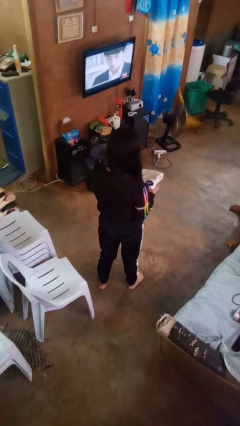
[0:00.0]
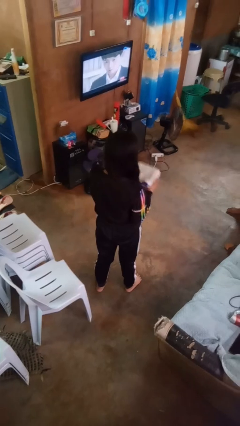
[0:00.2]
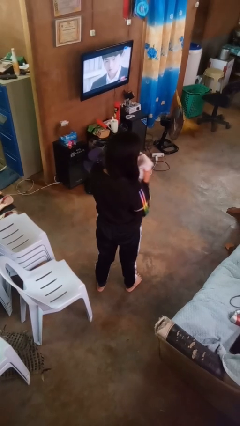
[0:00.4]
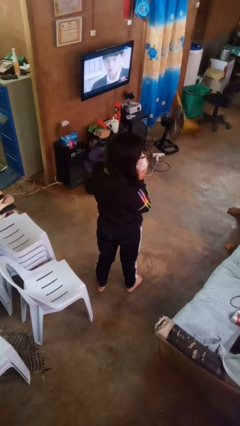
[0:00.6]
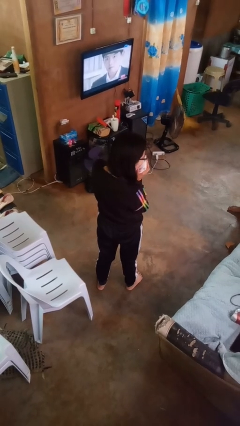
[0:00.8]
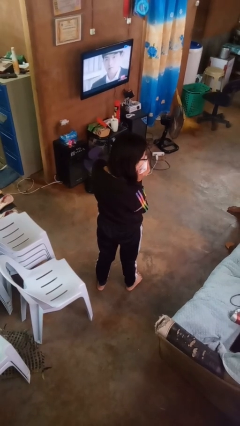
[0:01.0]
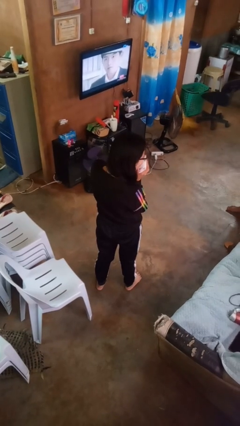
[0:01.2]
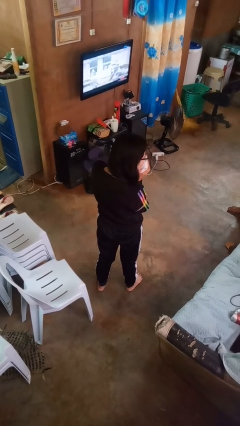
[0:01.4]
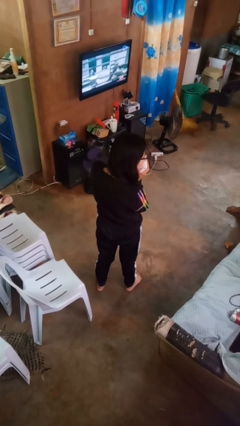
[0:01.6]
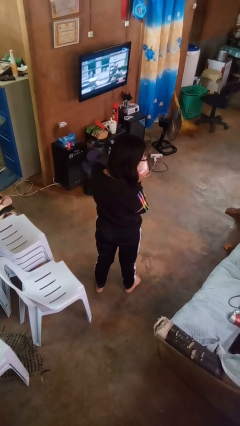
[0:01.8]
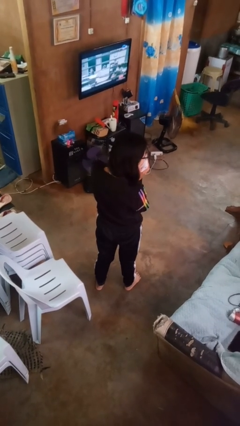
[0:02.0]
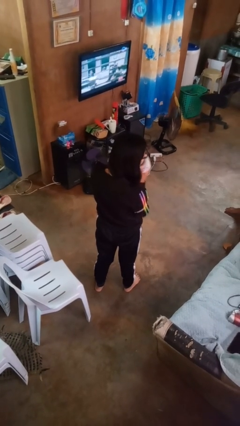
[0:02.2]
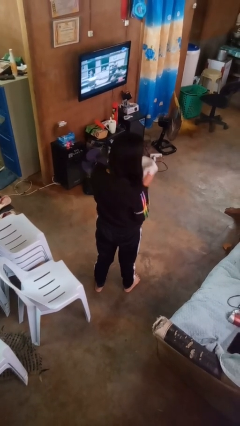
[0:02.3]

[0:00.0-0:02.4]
person blows nose

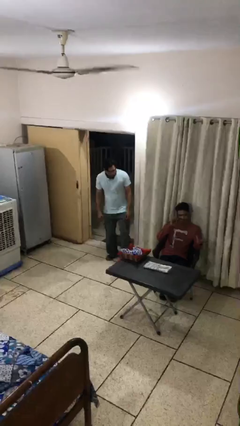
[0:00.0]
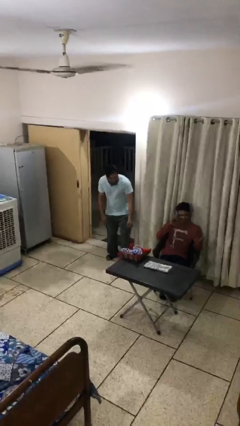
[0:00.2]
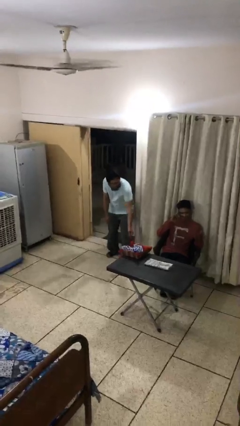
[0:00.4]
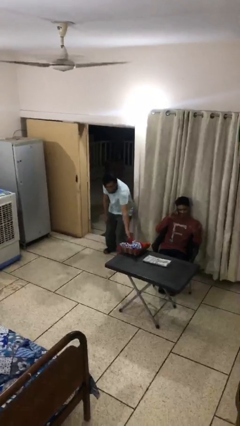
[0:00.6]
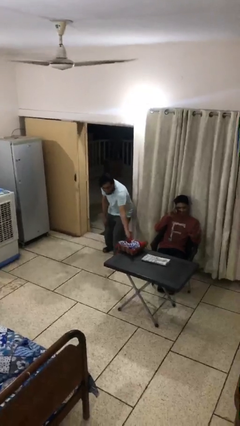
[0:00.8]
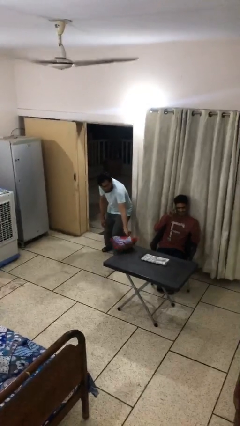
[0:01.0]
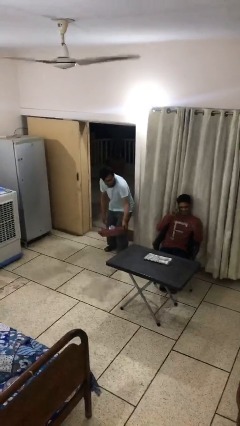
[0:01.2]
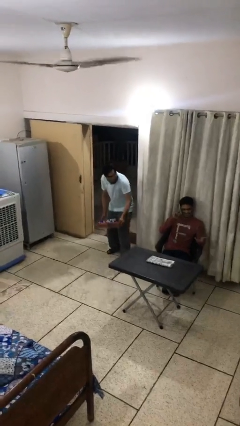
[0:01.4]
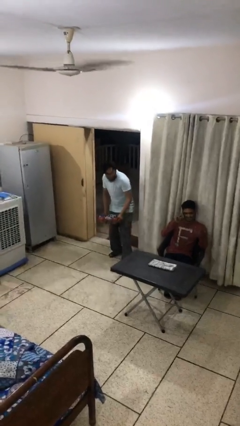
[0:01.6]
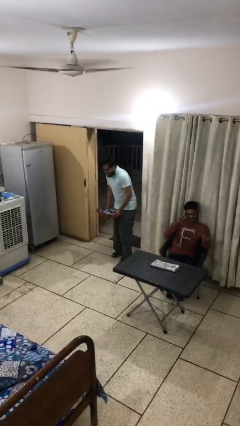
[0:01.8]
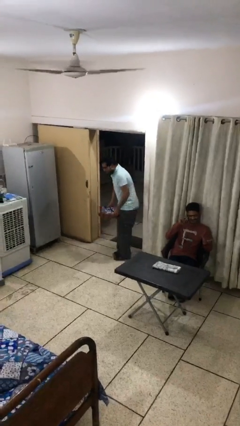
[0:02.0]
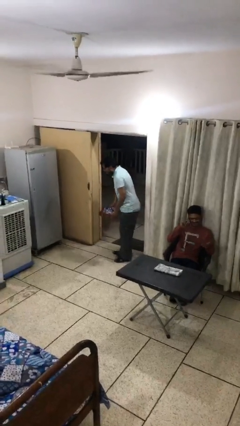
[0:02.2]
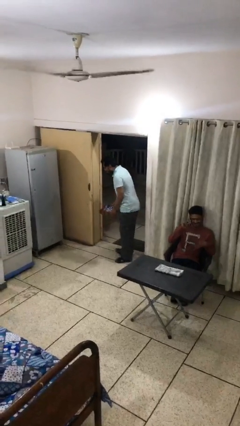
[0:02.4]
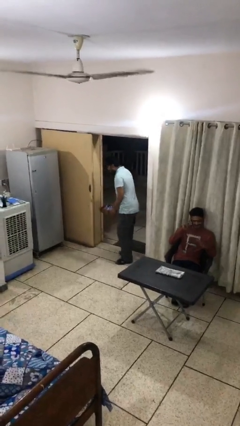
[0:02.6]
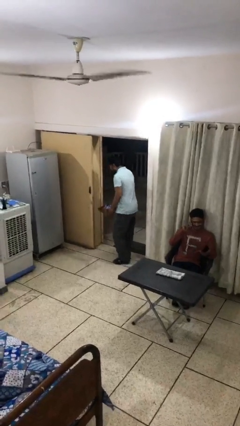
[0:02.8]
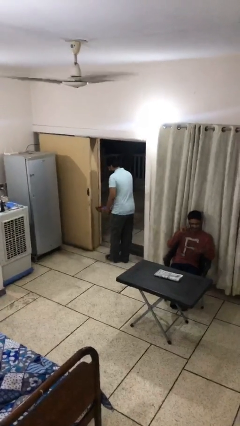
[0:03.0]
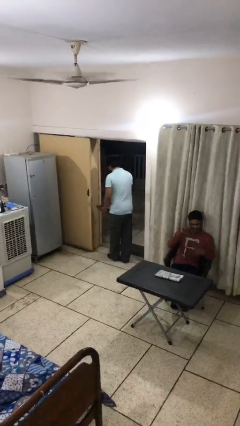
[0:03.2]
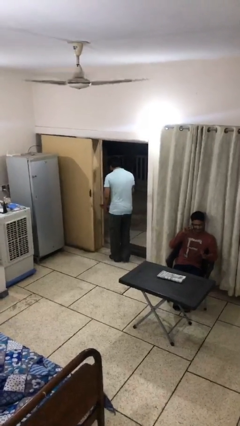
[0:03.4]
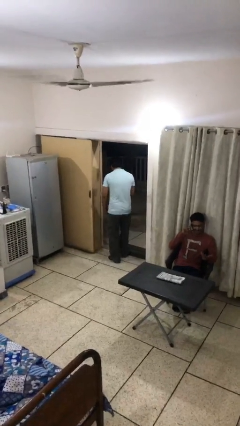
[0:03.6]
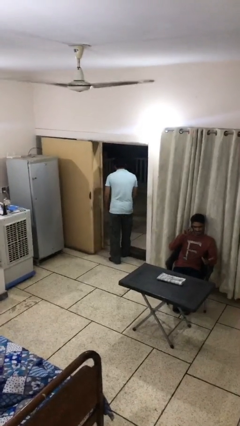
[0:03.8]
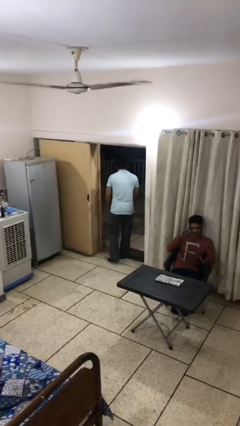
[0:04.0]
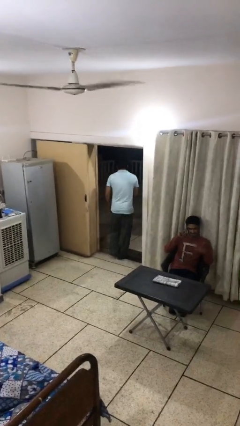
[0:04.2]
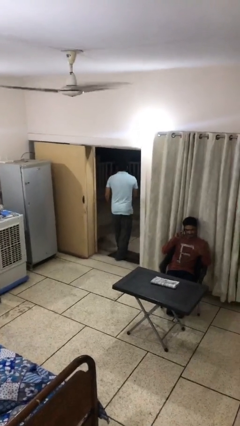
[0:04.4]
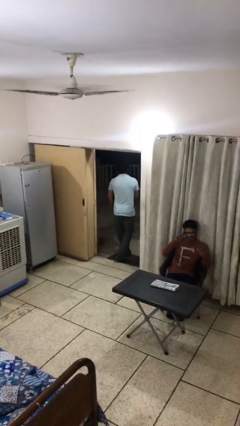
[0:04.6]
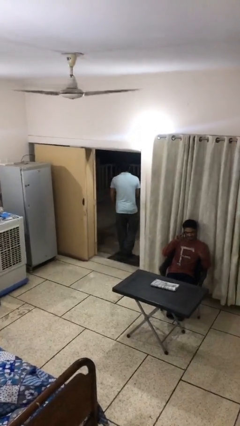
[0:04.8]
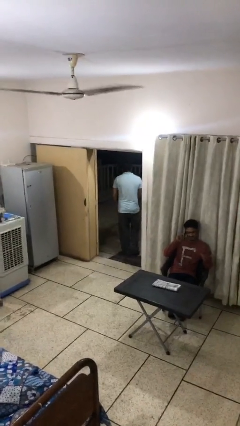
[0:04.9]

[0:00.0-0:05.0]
person steals object from person

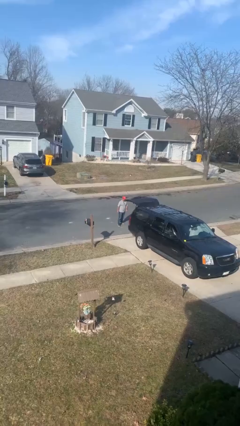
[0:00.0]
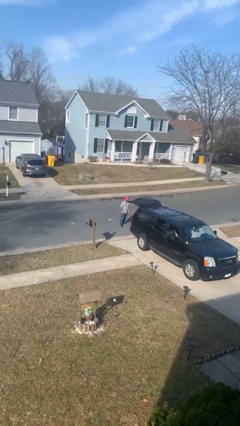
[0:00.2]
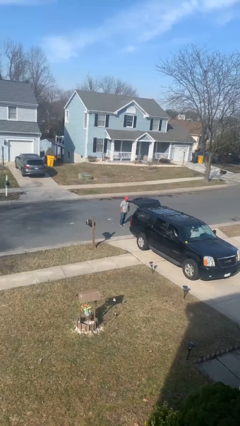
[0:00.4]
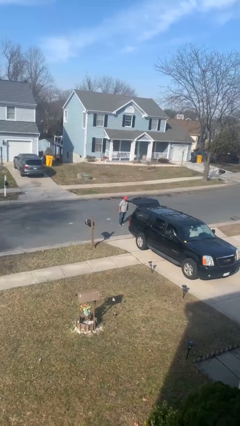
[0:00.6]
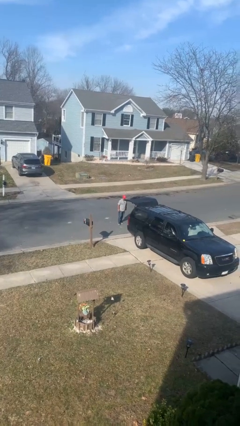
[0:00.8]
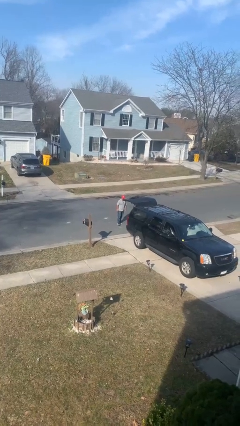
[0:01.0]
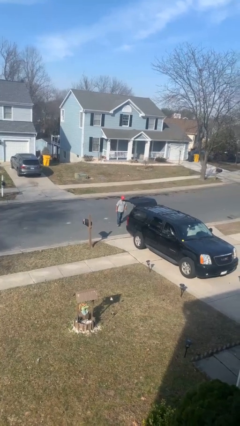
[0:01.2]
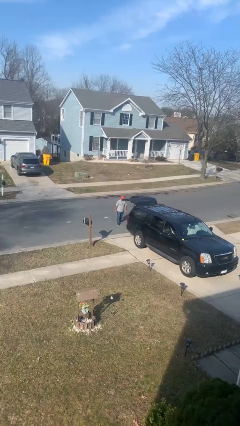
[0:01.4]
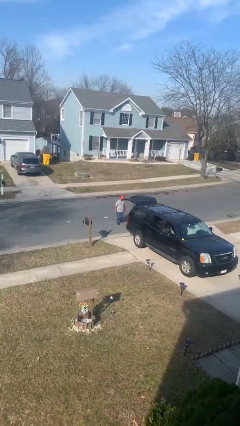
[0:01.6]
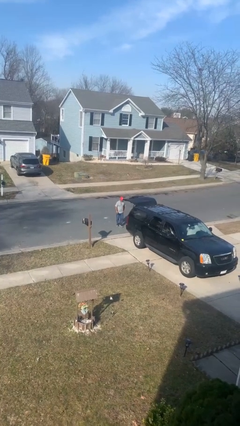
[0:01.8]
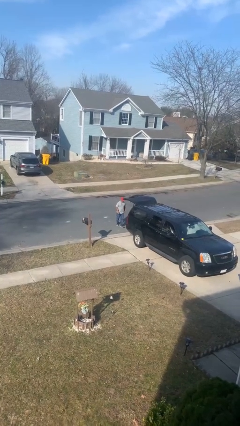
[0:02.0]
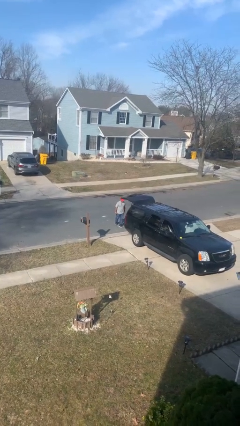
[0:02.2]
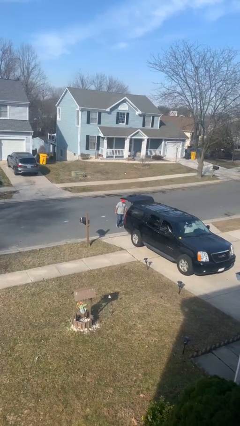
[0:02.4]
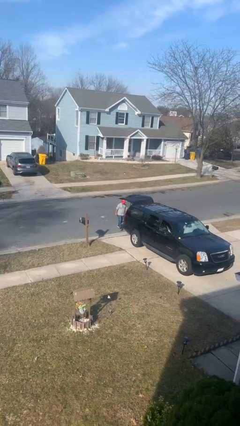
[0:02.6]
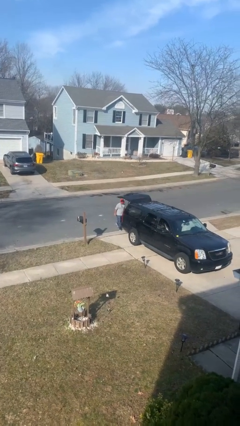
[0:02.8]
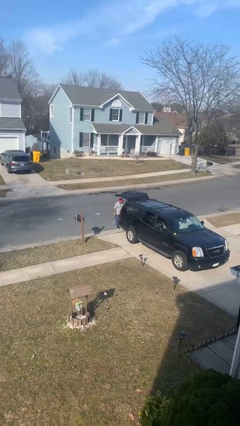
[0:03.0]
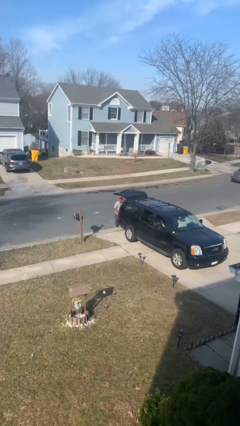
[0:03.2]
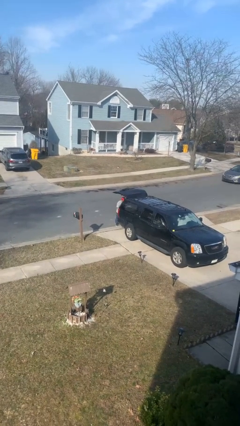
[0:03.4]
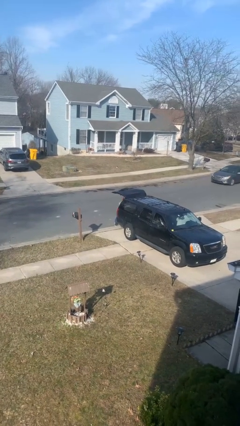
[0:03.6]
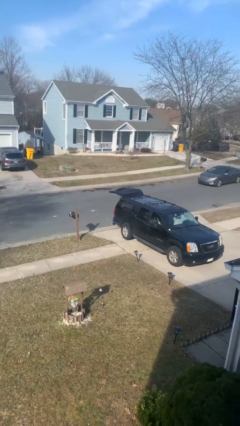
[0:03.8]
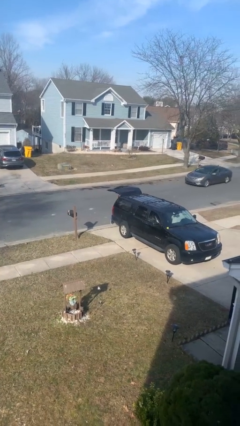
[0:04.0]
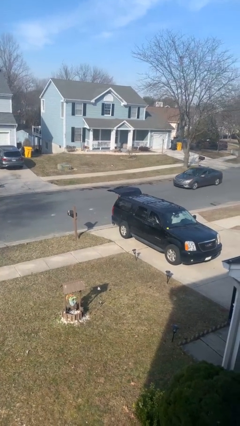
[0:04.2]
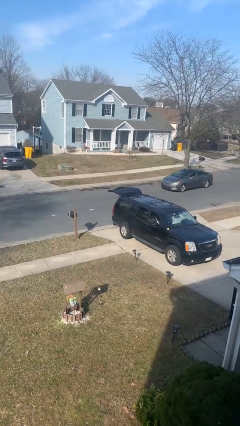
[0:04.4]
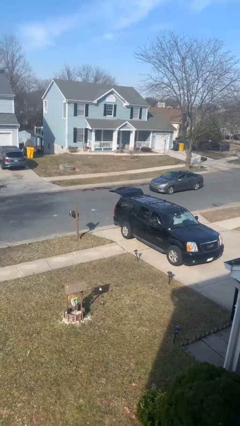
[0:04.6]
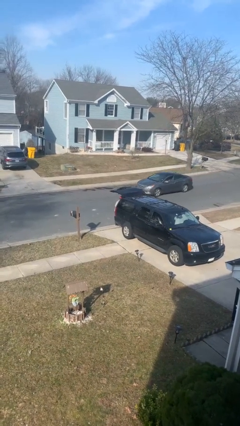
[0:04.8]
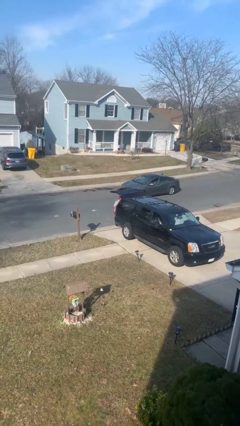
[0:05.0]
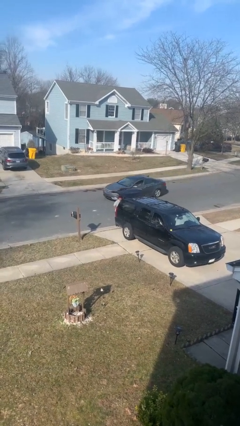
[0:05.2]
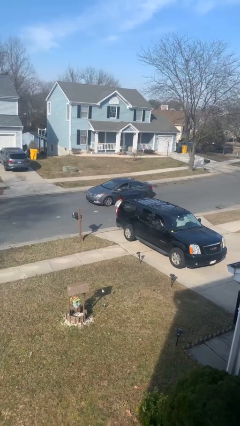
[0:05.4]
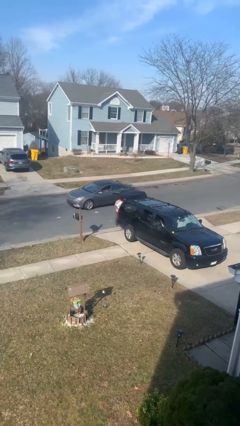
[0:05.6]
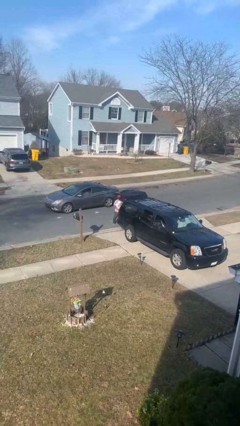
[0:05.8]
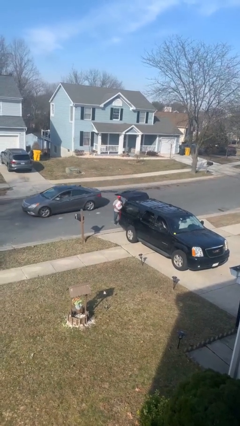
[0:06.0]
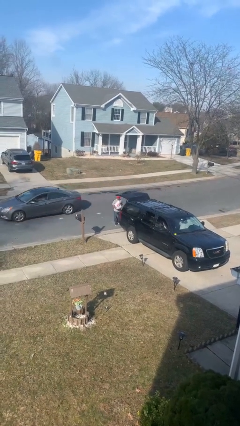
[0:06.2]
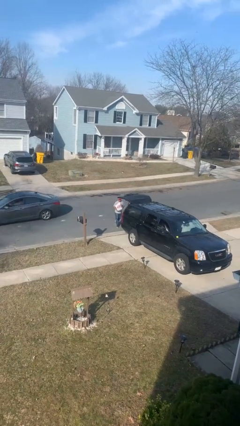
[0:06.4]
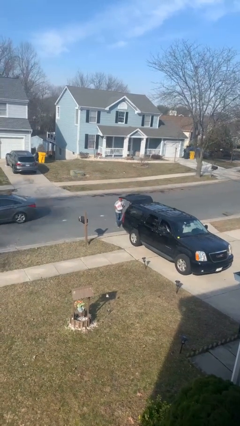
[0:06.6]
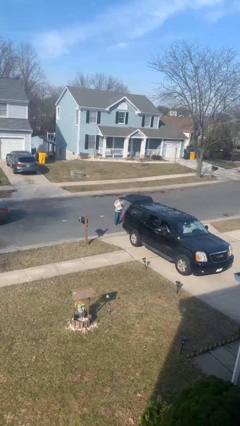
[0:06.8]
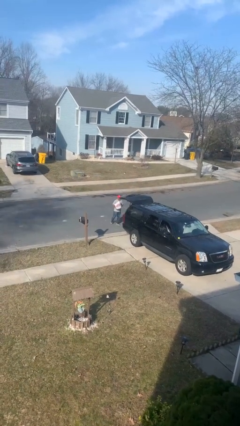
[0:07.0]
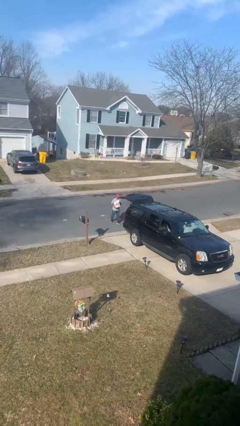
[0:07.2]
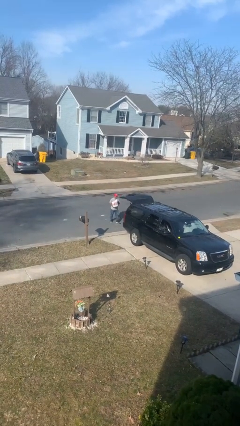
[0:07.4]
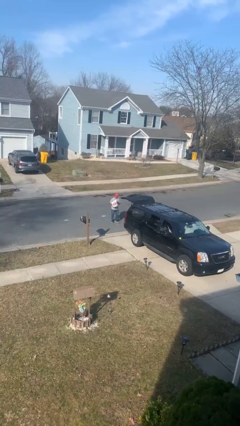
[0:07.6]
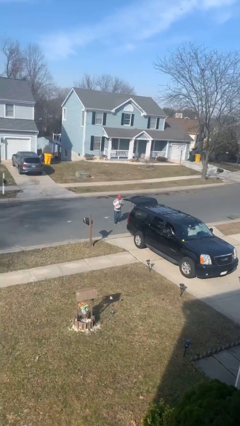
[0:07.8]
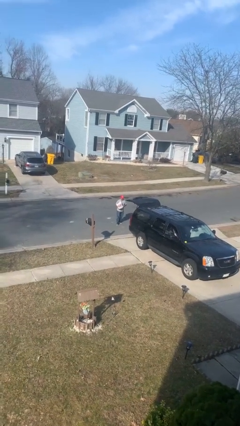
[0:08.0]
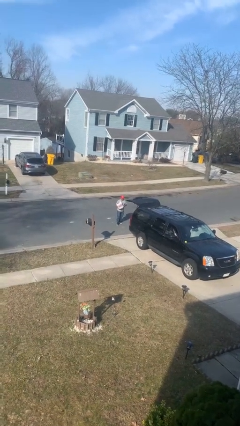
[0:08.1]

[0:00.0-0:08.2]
person unloads car

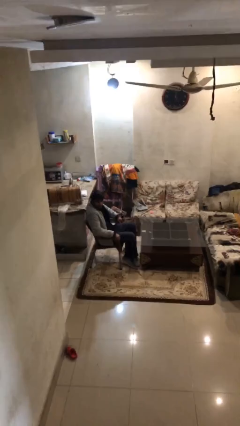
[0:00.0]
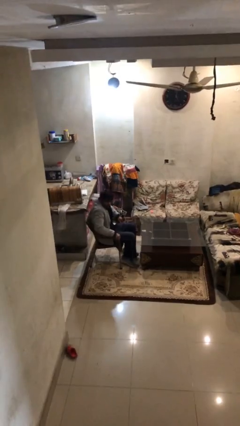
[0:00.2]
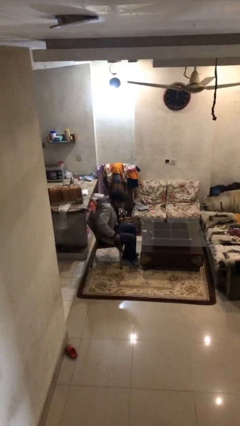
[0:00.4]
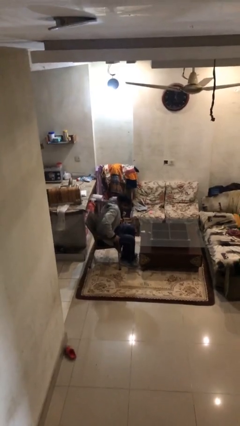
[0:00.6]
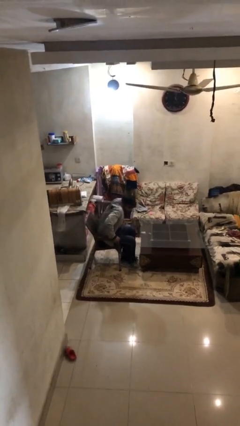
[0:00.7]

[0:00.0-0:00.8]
person sits down

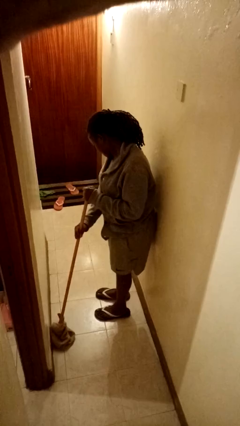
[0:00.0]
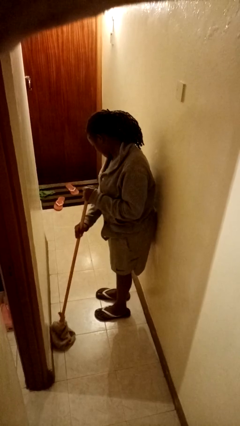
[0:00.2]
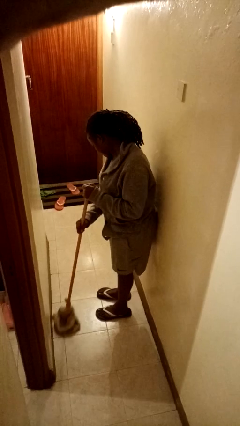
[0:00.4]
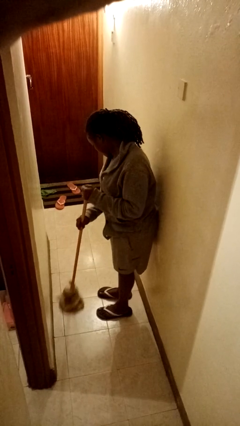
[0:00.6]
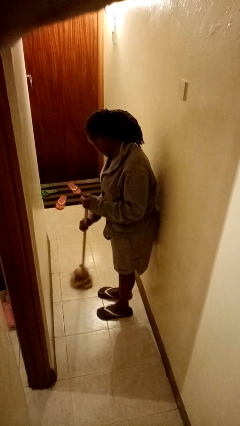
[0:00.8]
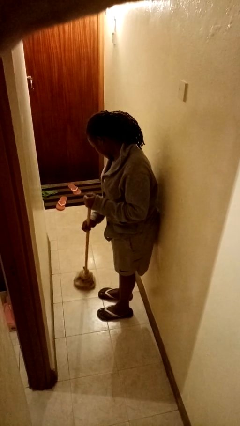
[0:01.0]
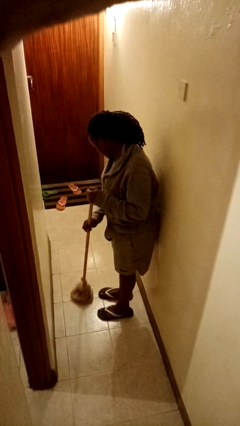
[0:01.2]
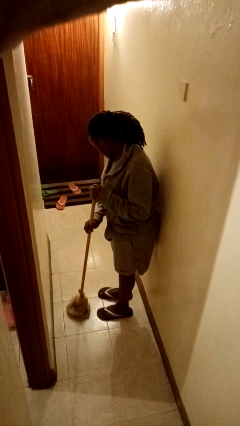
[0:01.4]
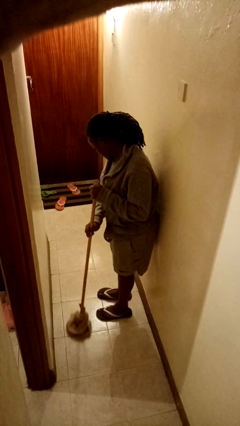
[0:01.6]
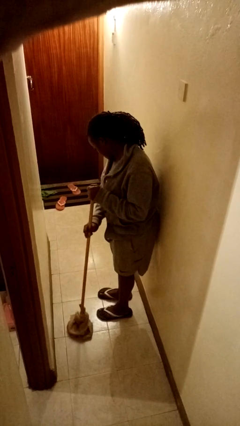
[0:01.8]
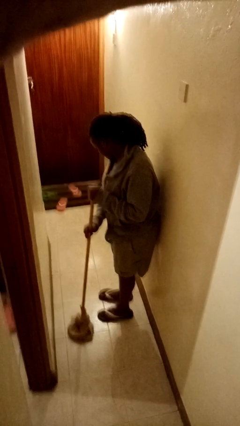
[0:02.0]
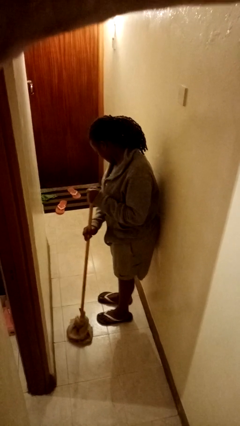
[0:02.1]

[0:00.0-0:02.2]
person mops
